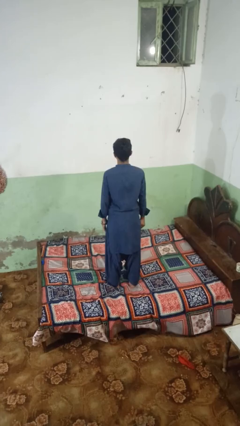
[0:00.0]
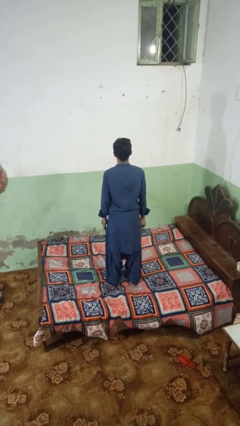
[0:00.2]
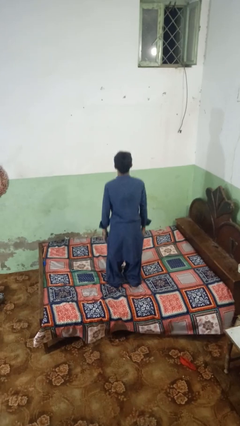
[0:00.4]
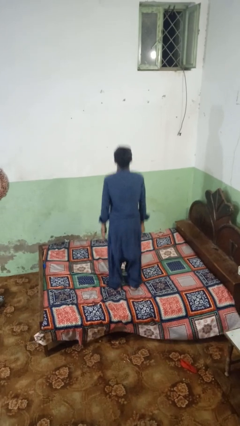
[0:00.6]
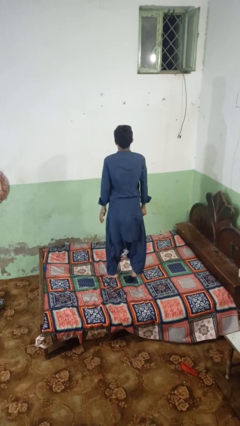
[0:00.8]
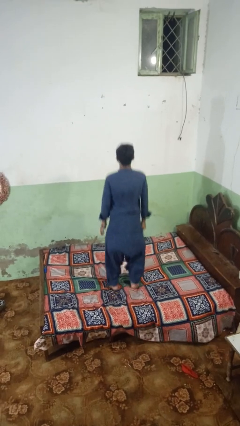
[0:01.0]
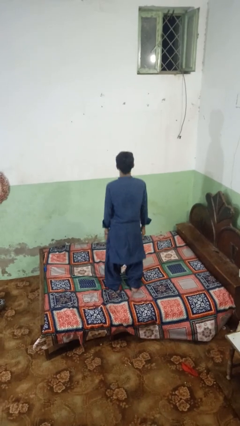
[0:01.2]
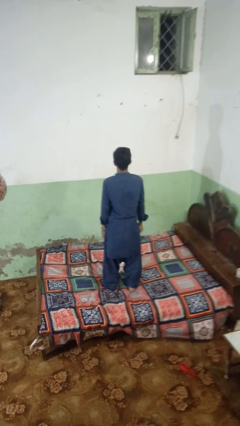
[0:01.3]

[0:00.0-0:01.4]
person jumps on bed

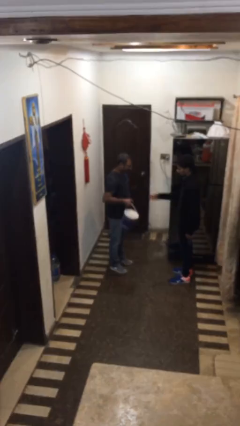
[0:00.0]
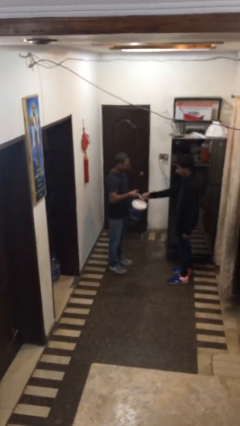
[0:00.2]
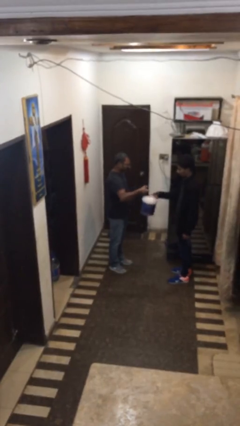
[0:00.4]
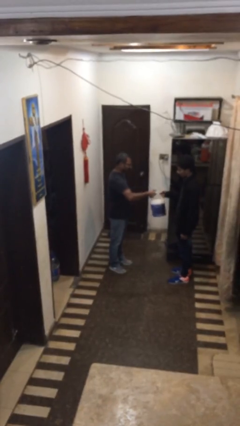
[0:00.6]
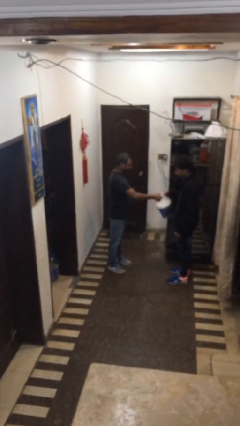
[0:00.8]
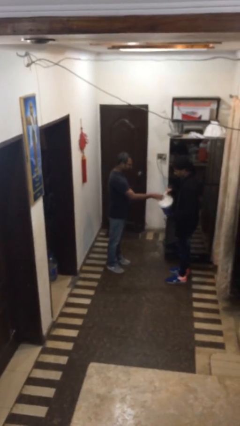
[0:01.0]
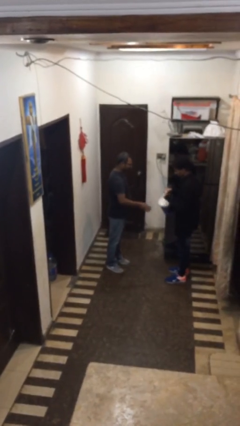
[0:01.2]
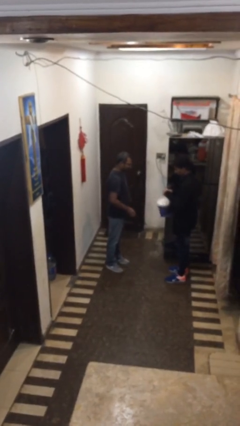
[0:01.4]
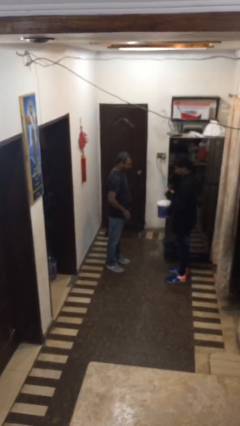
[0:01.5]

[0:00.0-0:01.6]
person transfers object to person

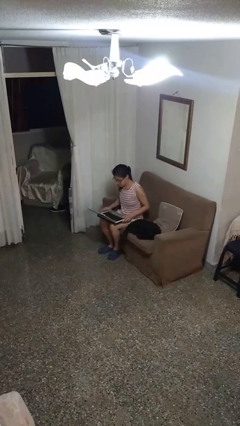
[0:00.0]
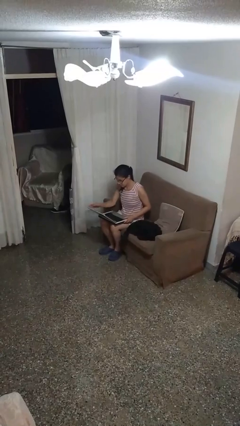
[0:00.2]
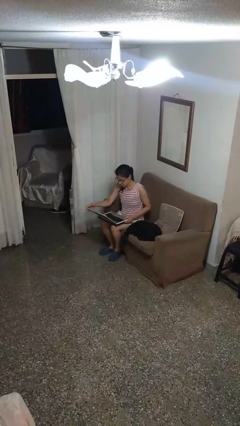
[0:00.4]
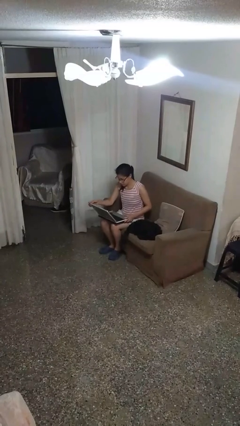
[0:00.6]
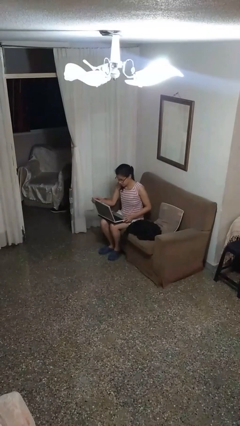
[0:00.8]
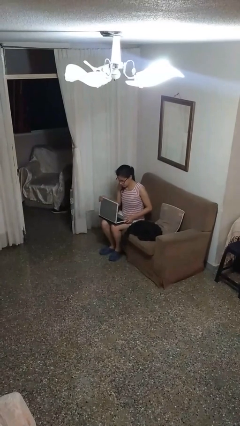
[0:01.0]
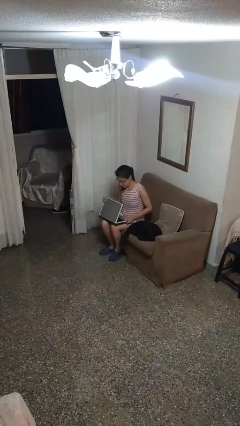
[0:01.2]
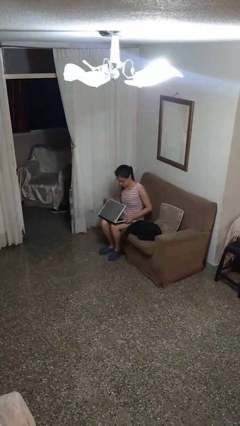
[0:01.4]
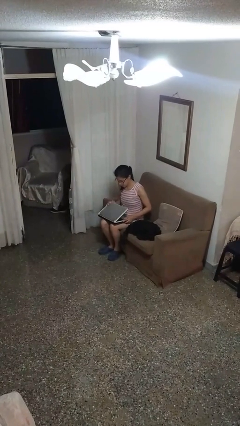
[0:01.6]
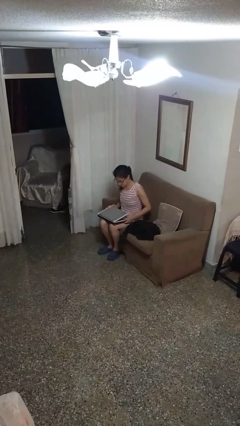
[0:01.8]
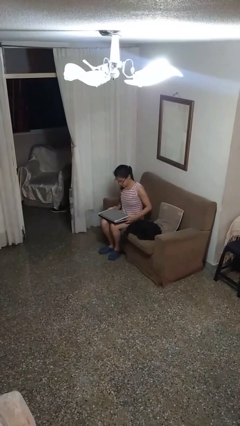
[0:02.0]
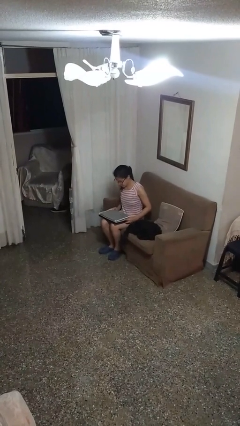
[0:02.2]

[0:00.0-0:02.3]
person closes laptop

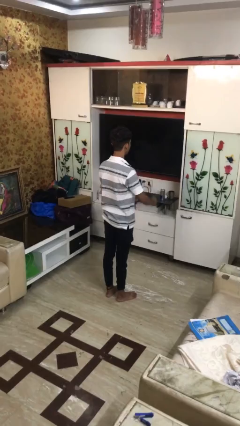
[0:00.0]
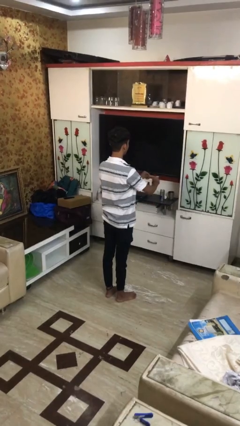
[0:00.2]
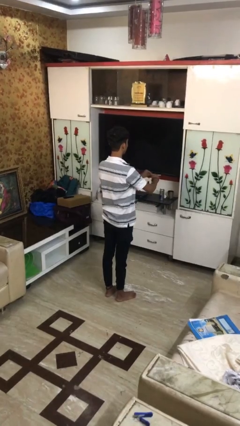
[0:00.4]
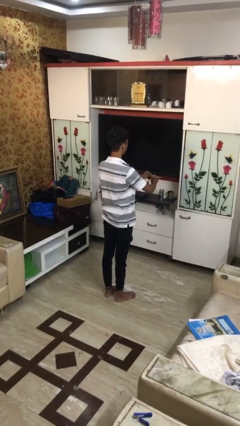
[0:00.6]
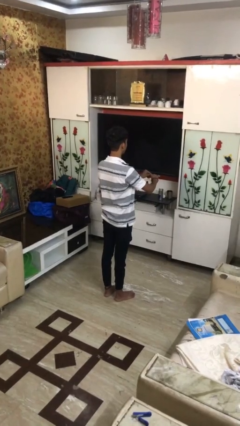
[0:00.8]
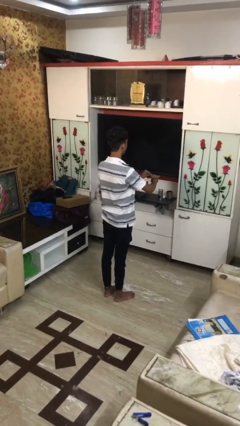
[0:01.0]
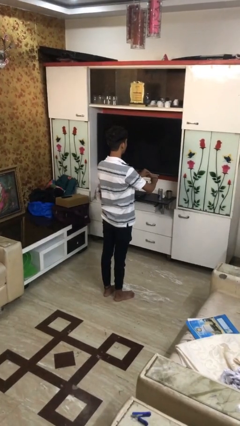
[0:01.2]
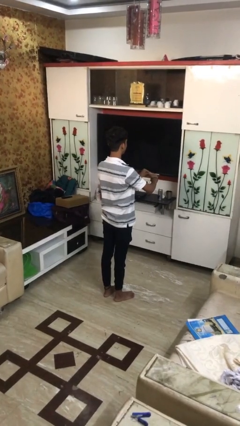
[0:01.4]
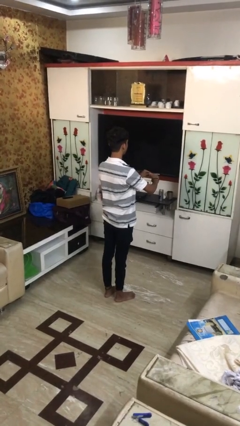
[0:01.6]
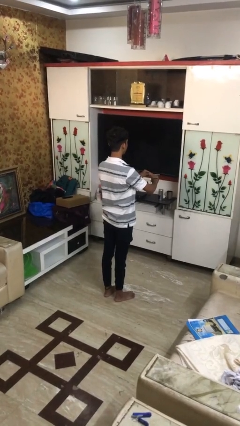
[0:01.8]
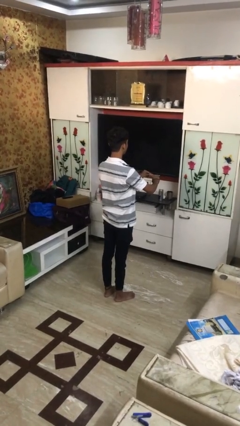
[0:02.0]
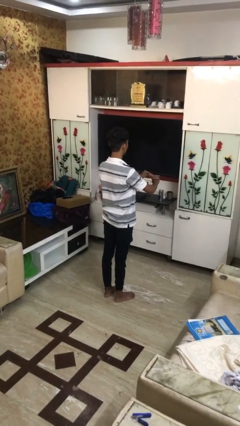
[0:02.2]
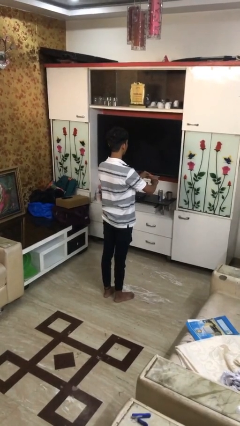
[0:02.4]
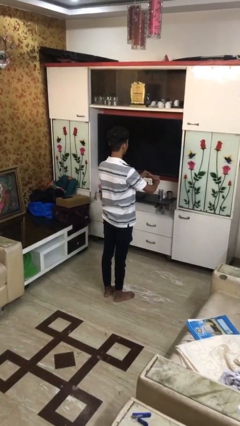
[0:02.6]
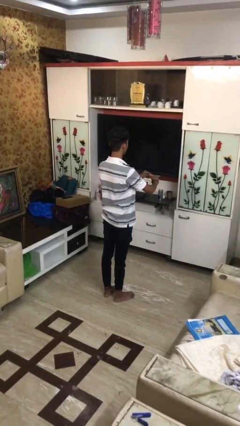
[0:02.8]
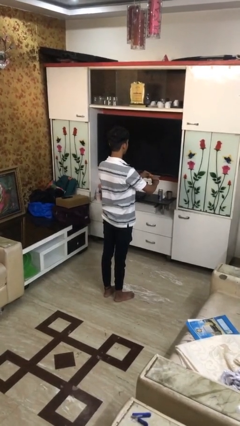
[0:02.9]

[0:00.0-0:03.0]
person files fingernails

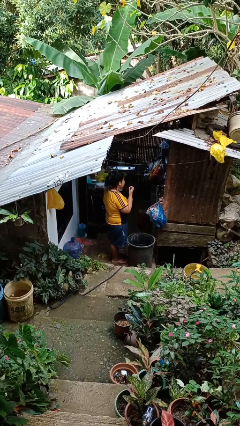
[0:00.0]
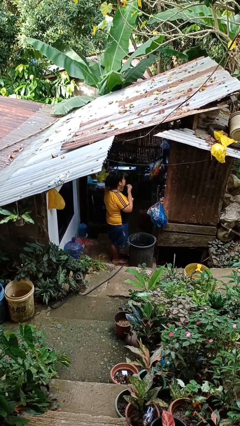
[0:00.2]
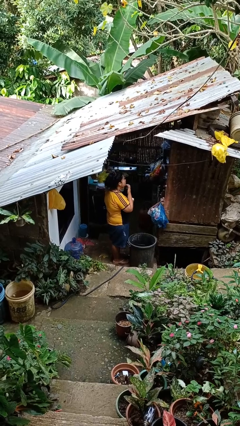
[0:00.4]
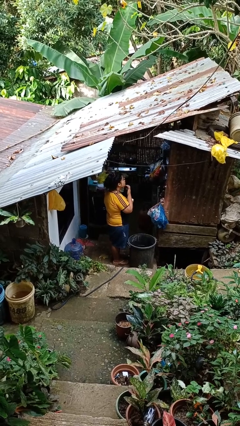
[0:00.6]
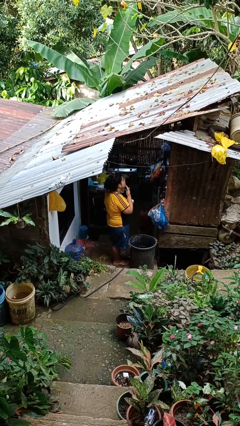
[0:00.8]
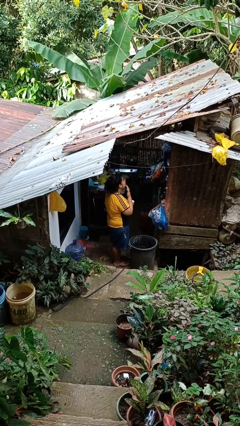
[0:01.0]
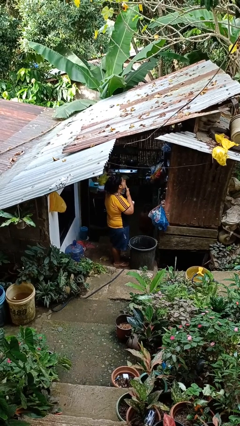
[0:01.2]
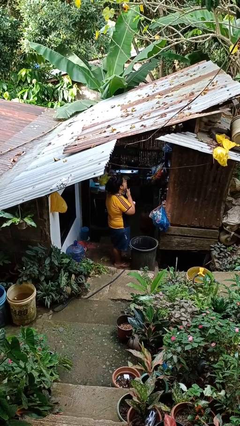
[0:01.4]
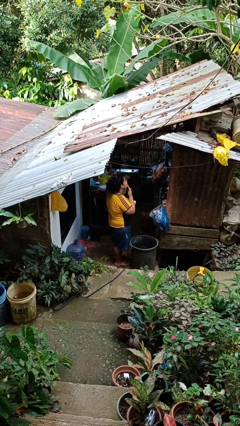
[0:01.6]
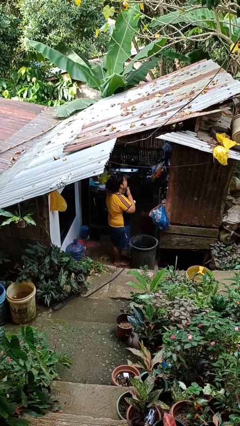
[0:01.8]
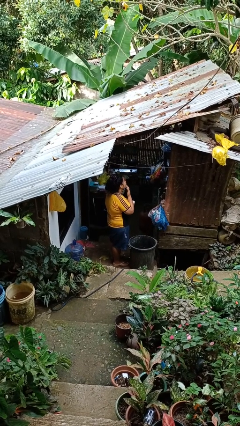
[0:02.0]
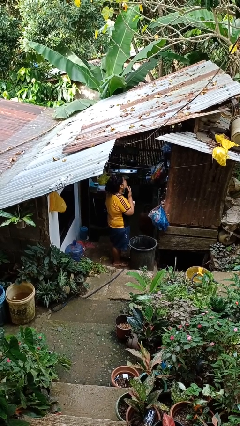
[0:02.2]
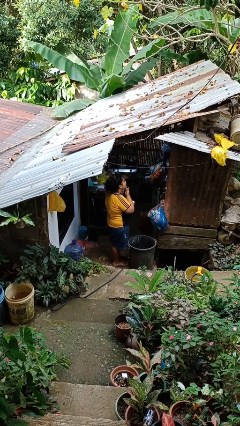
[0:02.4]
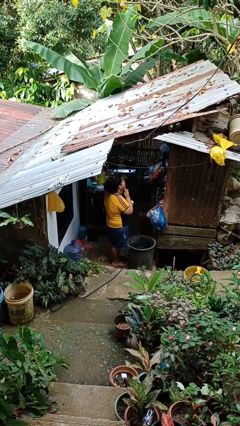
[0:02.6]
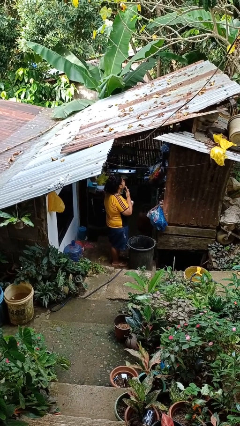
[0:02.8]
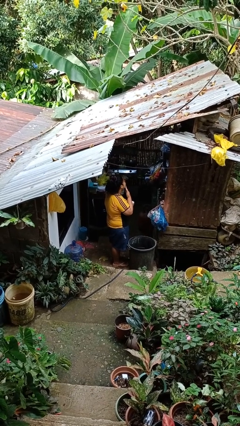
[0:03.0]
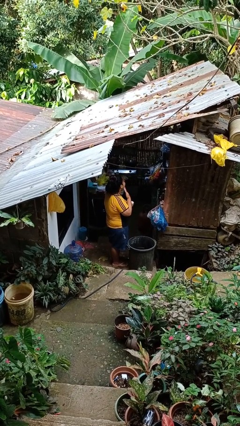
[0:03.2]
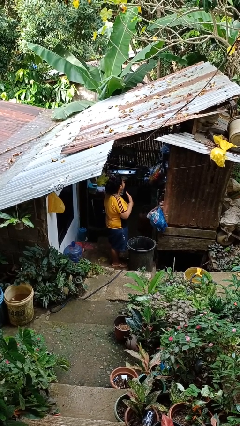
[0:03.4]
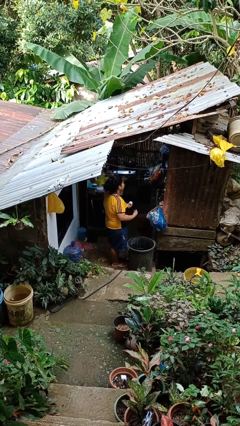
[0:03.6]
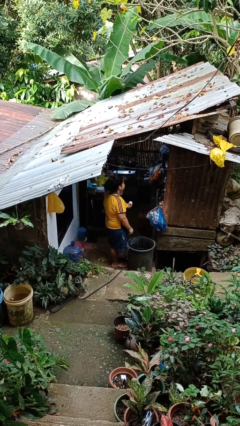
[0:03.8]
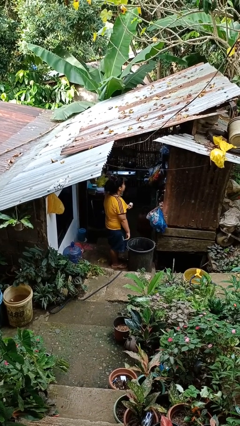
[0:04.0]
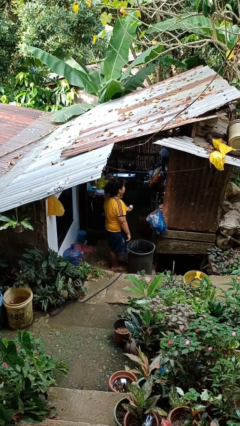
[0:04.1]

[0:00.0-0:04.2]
person applies facial moisturizer

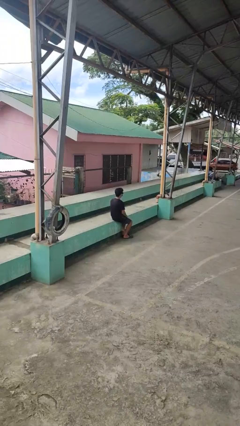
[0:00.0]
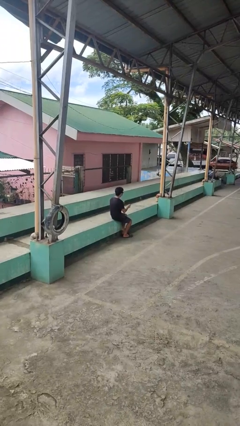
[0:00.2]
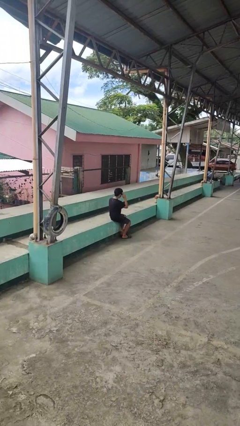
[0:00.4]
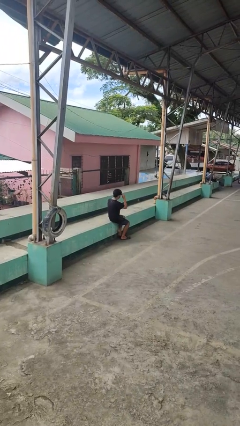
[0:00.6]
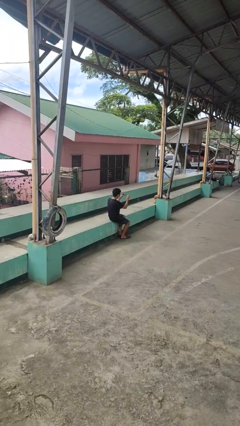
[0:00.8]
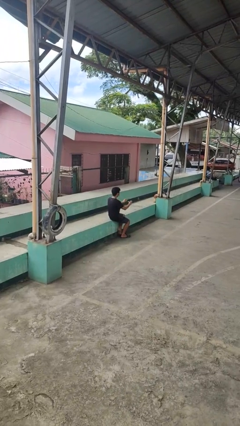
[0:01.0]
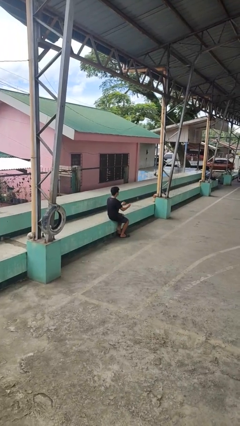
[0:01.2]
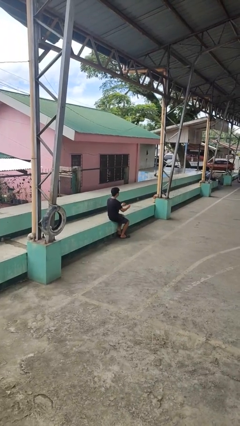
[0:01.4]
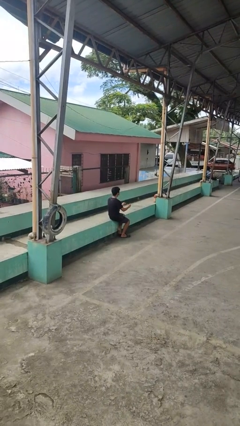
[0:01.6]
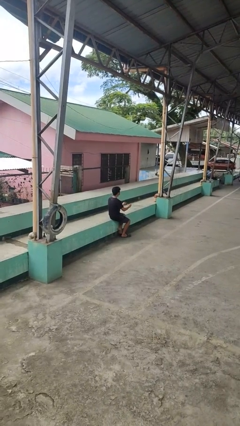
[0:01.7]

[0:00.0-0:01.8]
person takes off sunglasses

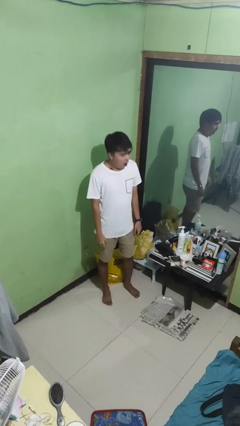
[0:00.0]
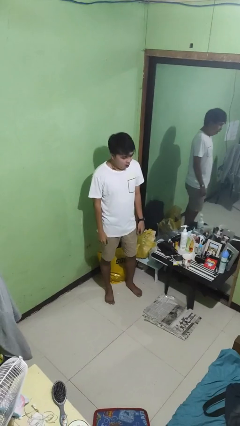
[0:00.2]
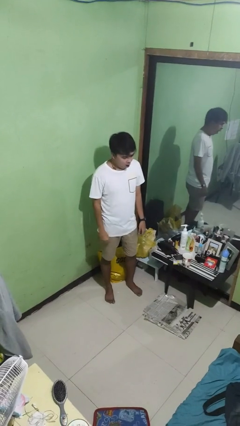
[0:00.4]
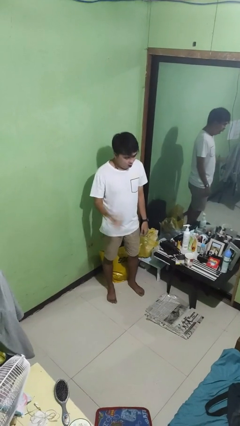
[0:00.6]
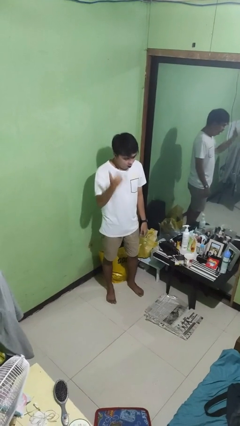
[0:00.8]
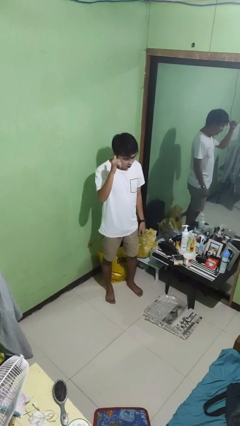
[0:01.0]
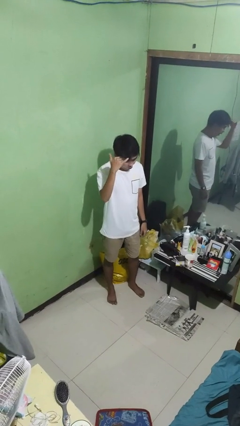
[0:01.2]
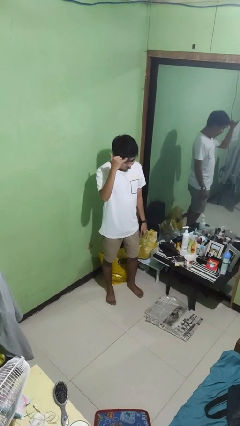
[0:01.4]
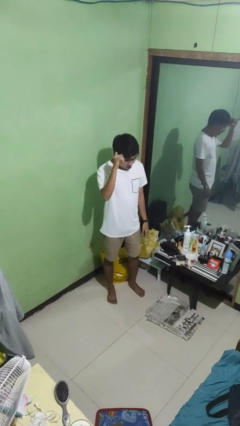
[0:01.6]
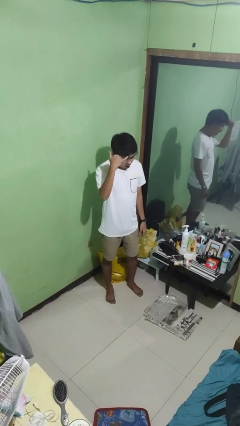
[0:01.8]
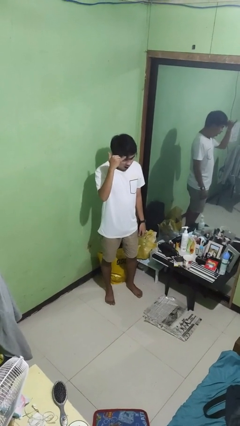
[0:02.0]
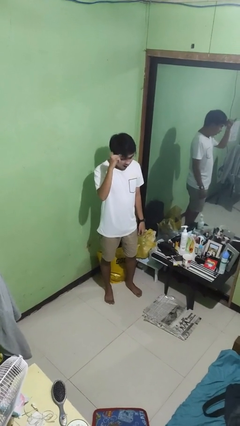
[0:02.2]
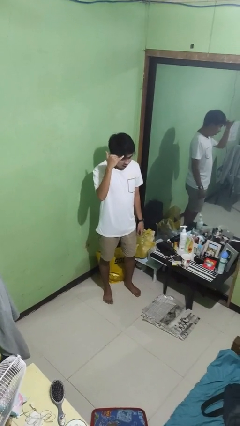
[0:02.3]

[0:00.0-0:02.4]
person gestures hang loose

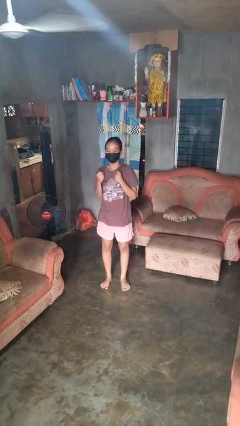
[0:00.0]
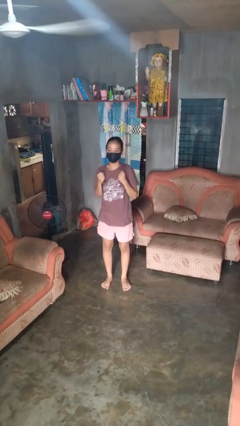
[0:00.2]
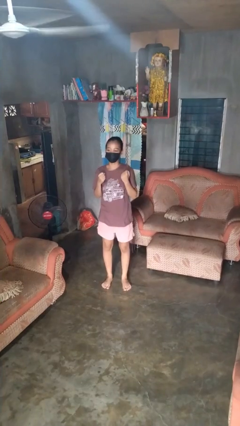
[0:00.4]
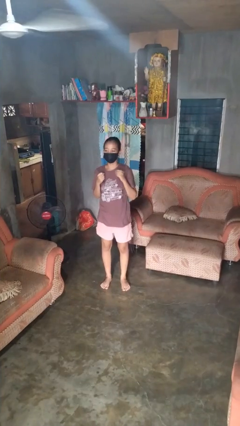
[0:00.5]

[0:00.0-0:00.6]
person punches
